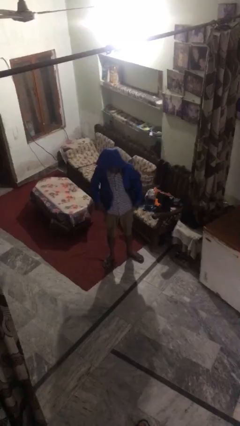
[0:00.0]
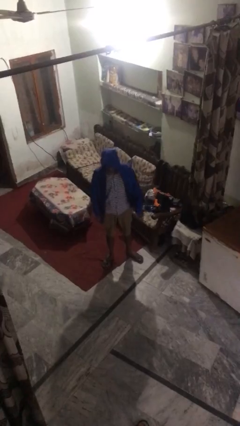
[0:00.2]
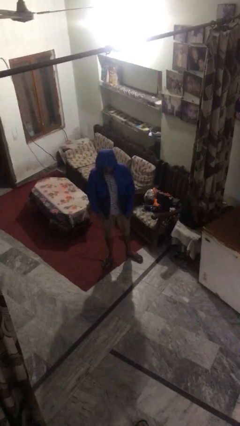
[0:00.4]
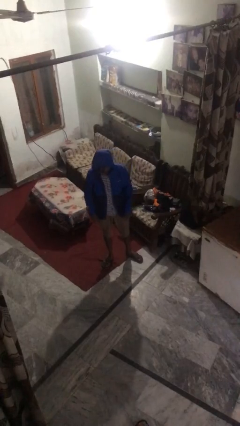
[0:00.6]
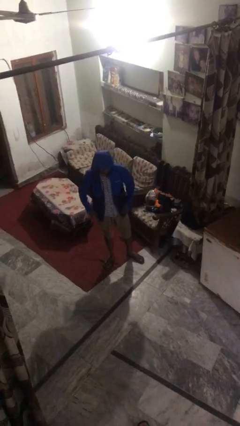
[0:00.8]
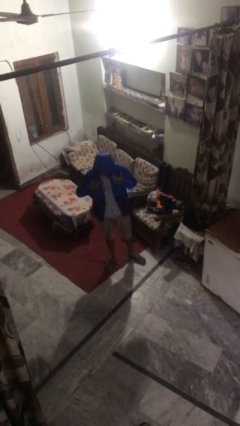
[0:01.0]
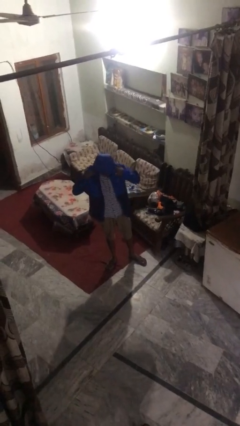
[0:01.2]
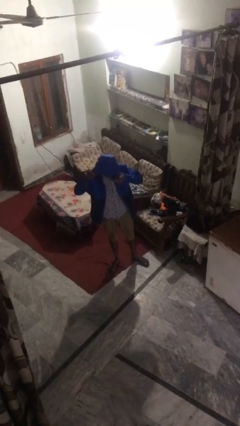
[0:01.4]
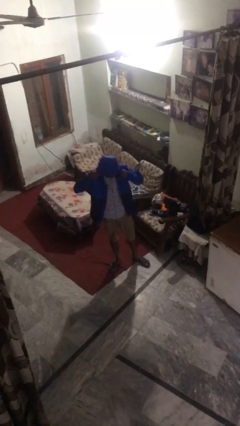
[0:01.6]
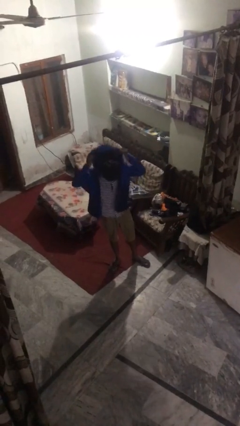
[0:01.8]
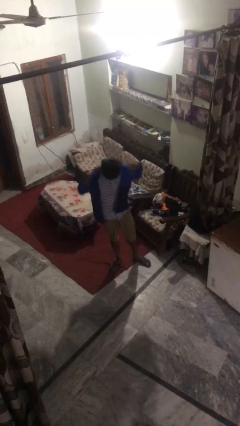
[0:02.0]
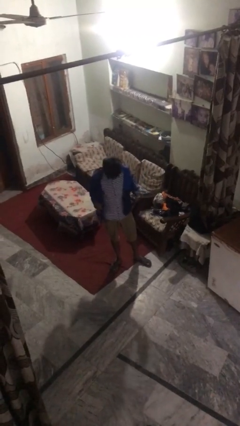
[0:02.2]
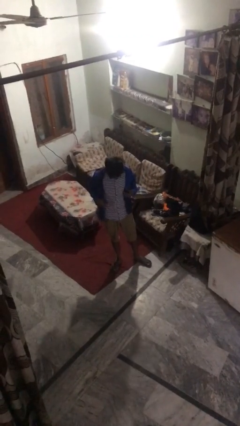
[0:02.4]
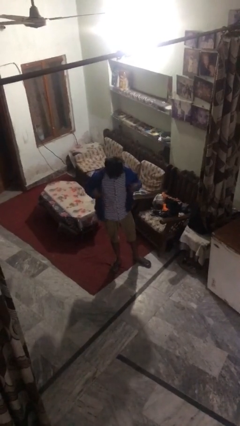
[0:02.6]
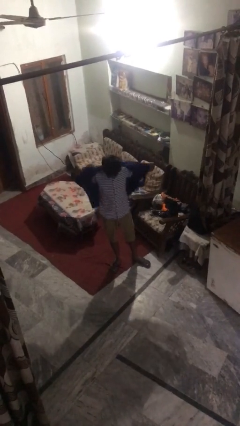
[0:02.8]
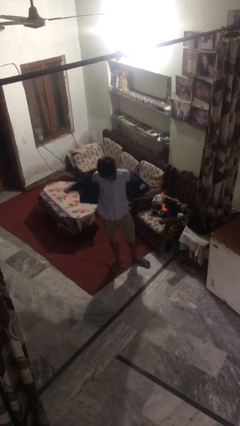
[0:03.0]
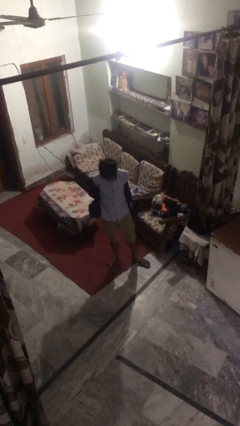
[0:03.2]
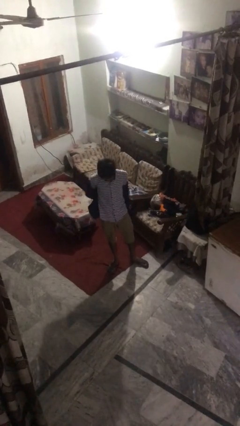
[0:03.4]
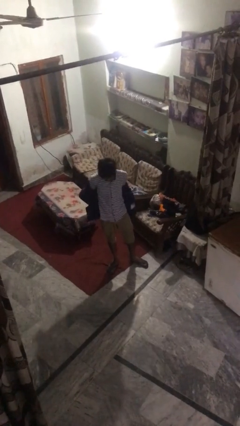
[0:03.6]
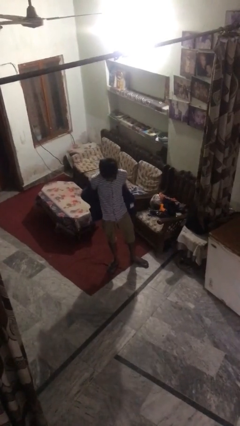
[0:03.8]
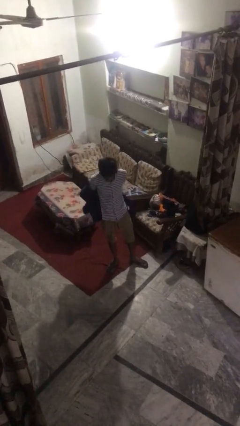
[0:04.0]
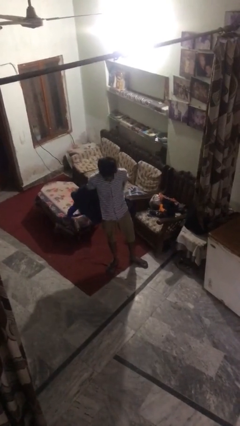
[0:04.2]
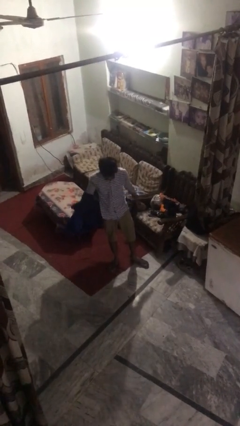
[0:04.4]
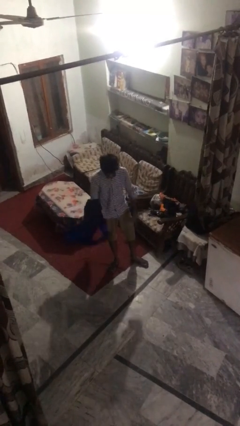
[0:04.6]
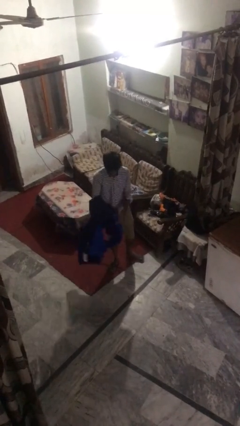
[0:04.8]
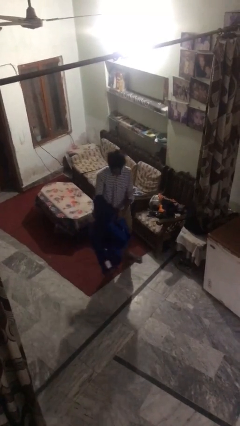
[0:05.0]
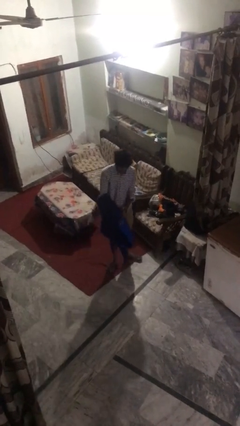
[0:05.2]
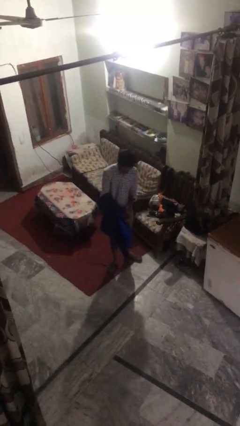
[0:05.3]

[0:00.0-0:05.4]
person takes off hoodie

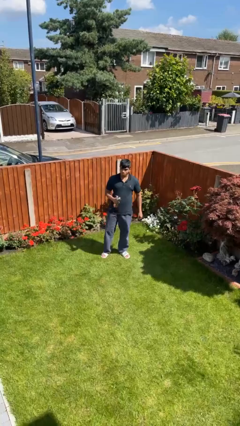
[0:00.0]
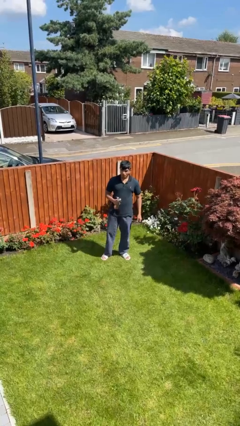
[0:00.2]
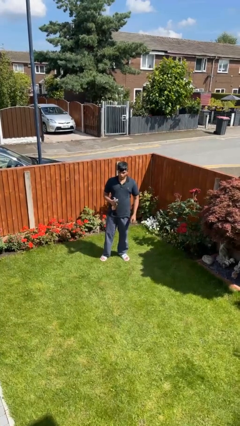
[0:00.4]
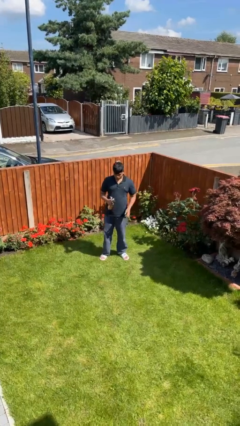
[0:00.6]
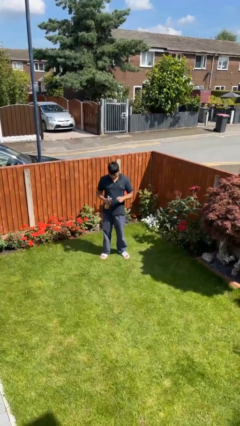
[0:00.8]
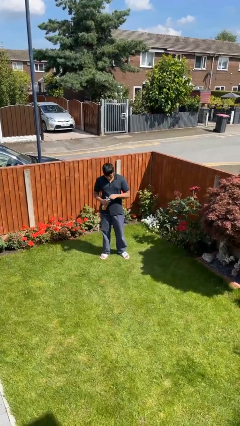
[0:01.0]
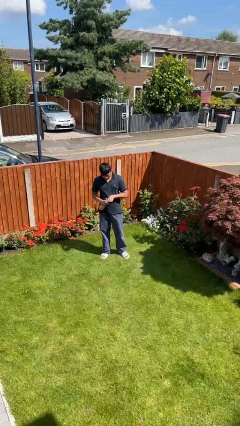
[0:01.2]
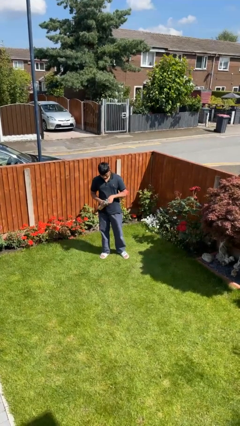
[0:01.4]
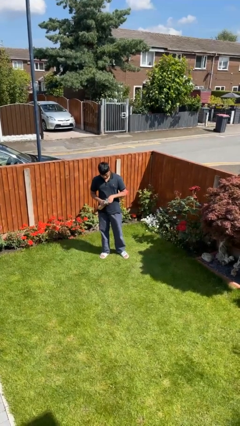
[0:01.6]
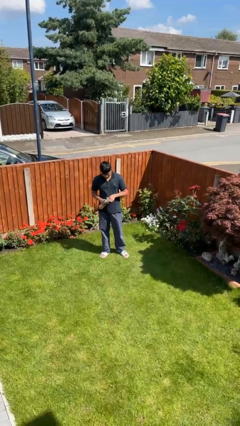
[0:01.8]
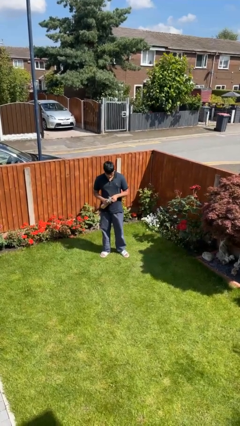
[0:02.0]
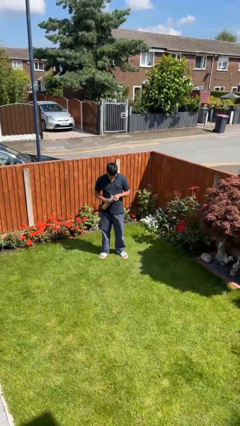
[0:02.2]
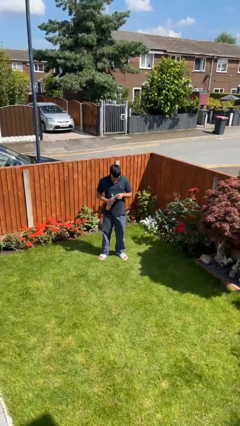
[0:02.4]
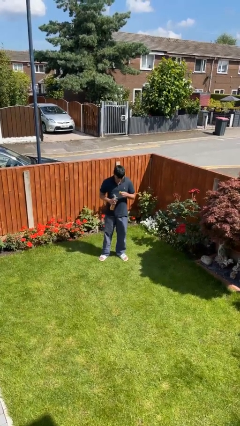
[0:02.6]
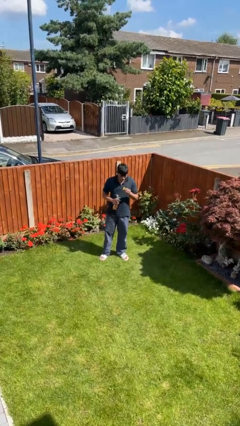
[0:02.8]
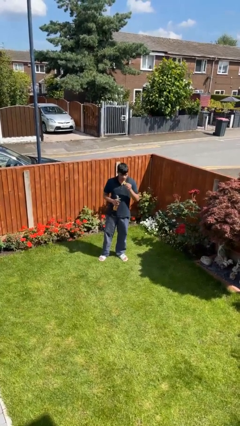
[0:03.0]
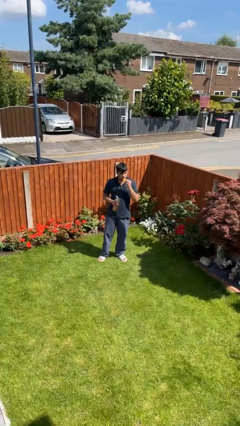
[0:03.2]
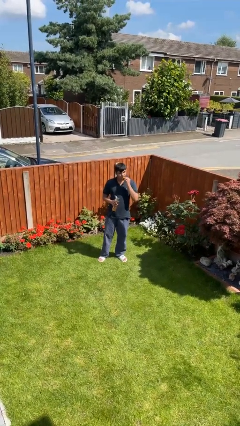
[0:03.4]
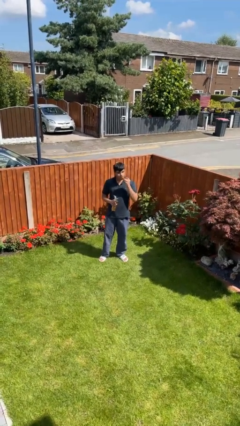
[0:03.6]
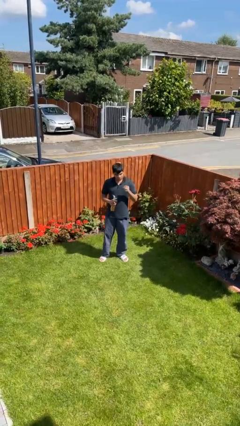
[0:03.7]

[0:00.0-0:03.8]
person eats snack from bag

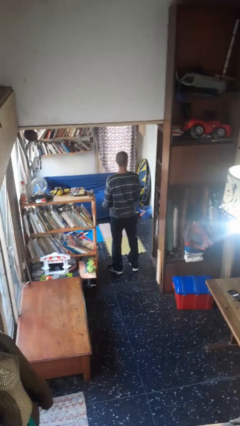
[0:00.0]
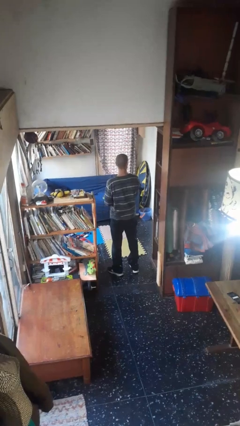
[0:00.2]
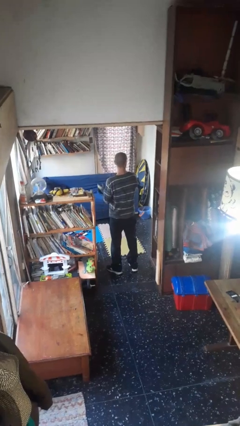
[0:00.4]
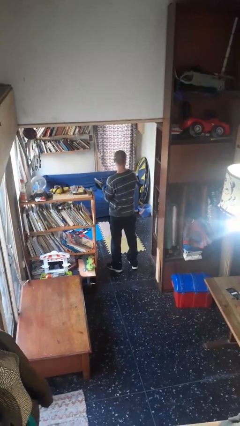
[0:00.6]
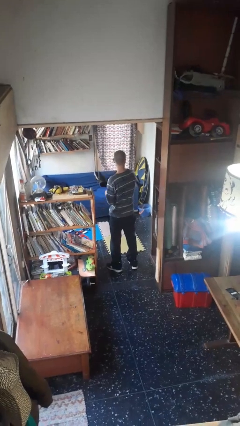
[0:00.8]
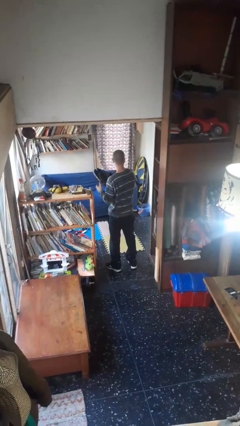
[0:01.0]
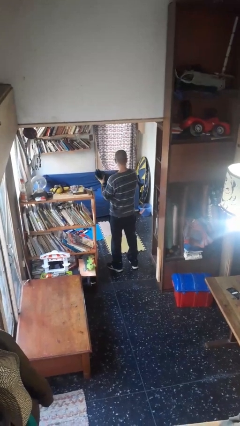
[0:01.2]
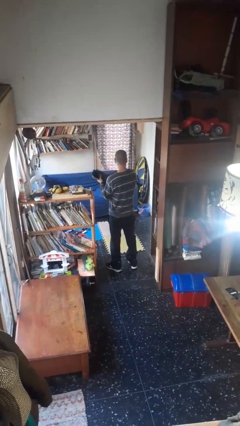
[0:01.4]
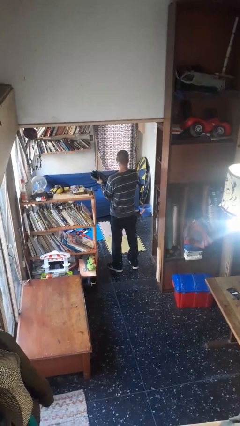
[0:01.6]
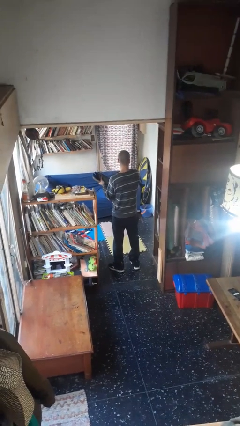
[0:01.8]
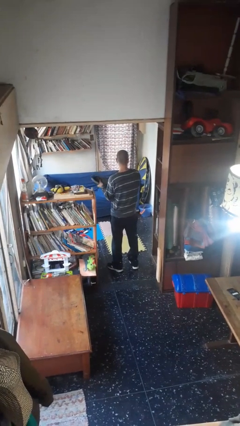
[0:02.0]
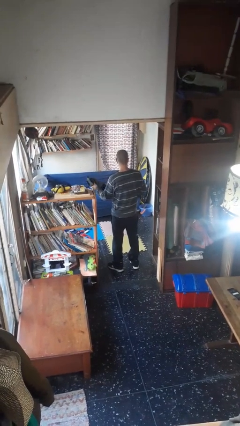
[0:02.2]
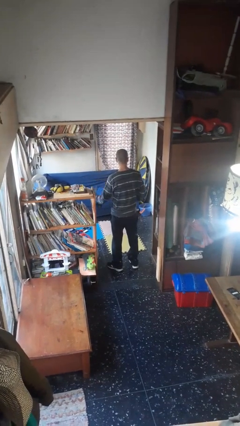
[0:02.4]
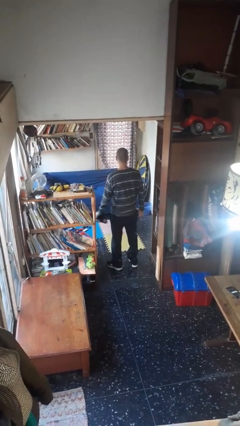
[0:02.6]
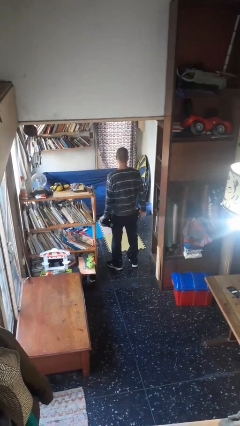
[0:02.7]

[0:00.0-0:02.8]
person takes off gloves

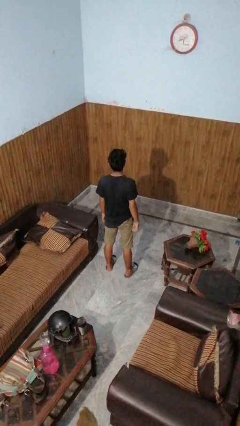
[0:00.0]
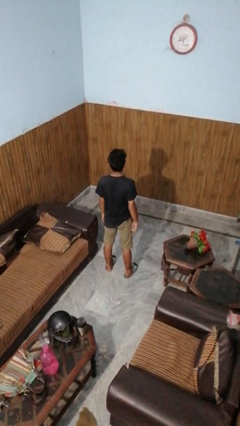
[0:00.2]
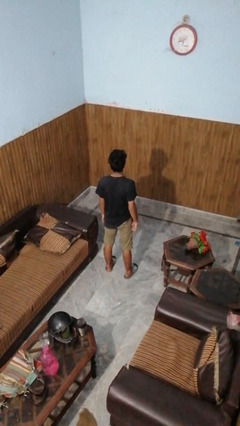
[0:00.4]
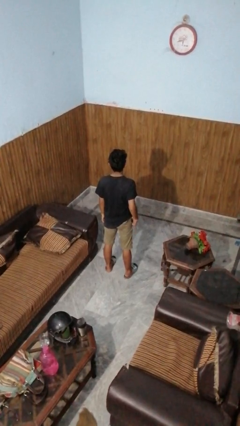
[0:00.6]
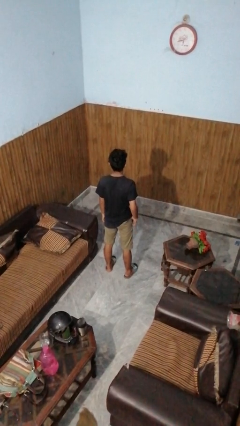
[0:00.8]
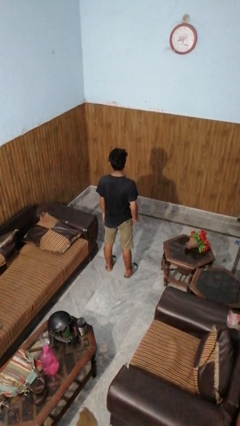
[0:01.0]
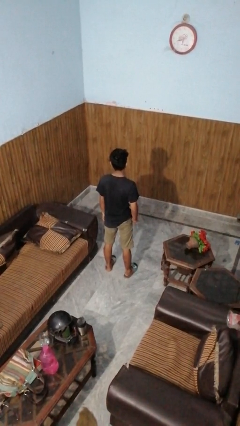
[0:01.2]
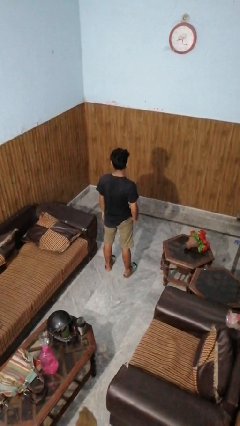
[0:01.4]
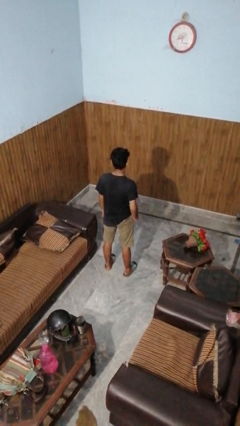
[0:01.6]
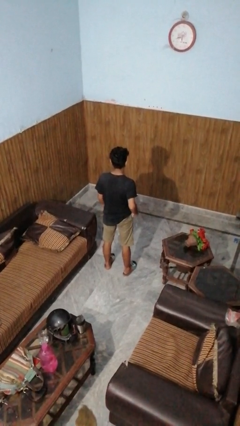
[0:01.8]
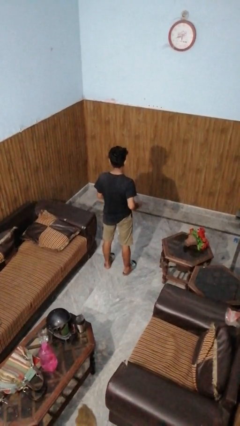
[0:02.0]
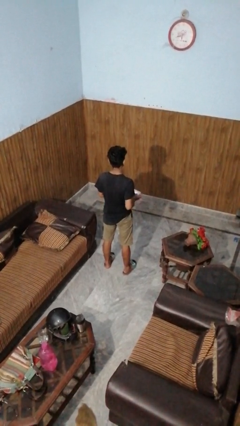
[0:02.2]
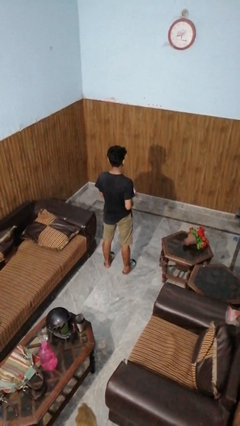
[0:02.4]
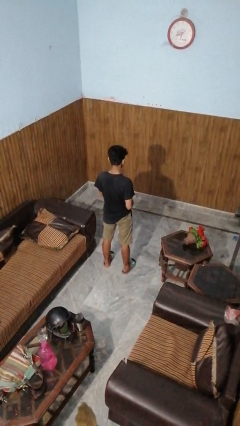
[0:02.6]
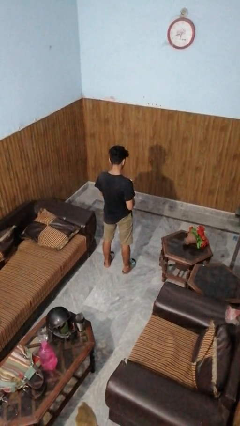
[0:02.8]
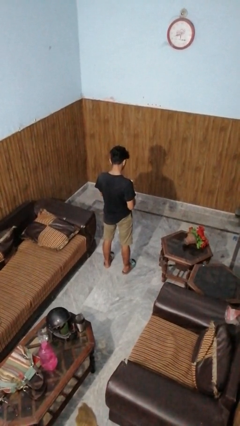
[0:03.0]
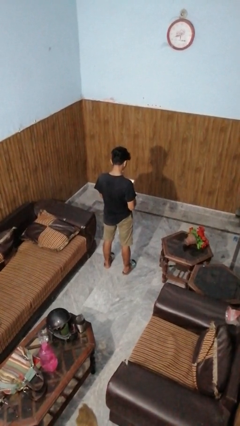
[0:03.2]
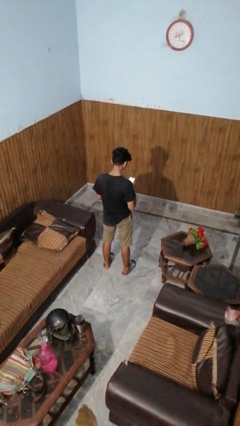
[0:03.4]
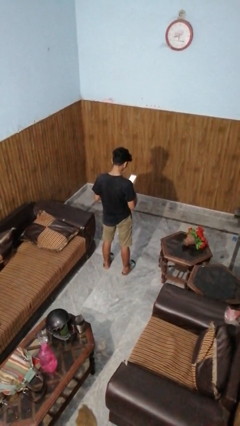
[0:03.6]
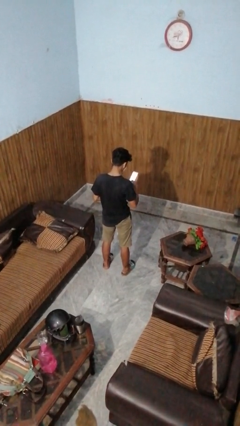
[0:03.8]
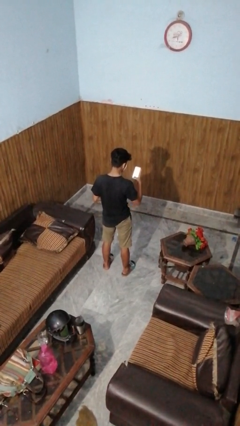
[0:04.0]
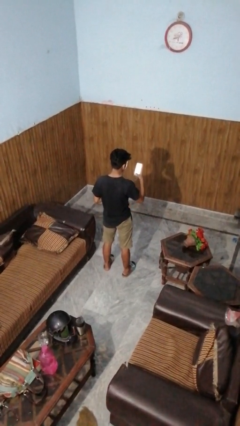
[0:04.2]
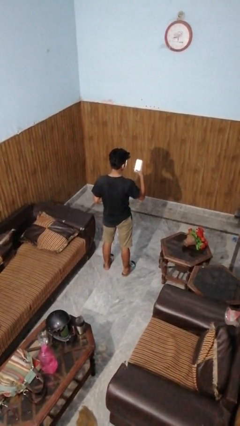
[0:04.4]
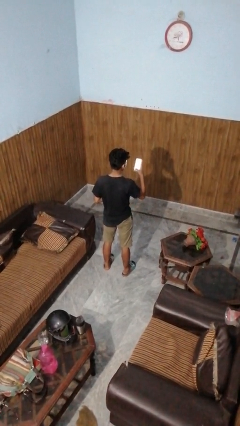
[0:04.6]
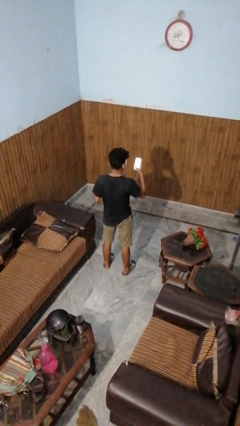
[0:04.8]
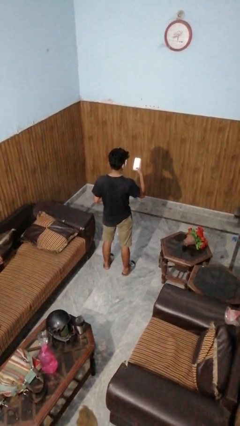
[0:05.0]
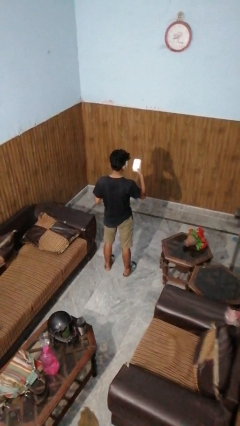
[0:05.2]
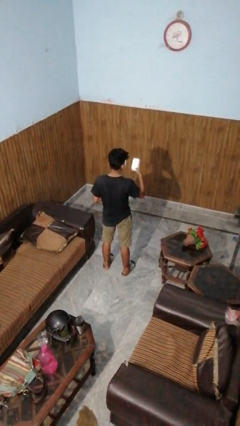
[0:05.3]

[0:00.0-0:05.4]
person takes phone from pocket

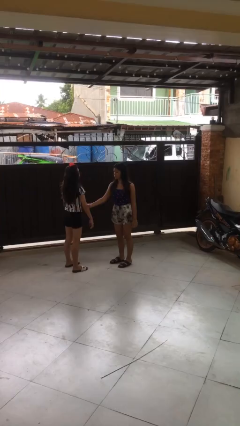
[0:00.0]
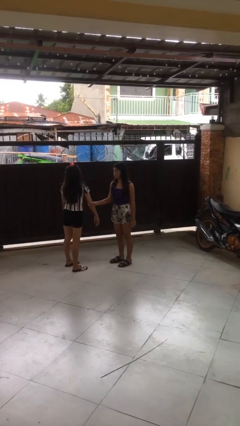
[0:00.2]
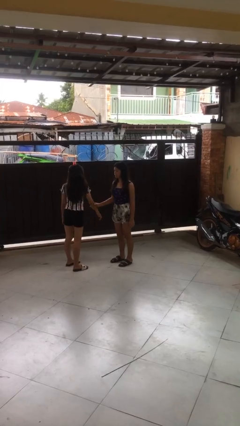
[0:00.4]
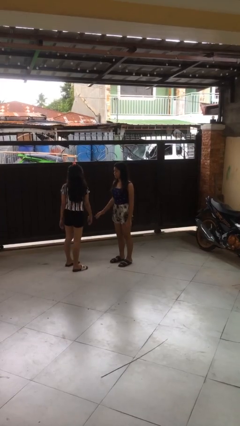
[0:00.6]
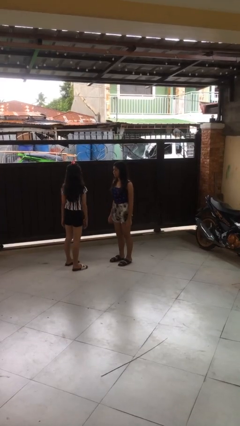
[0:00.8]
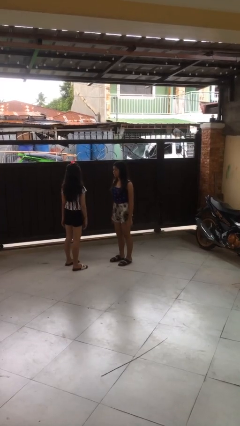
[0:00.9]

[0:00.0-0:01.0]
person grabs person by forearm
